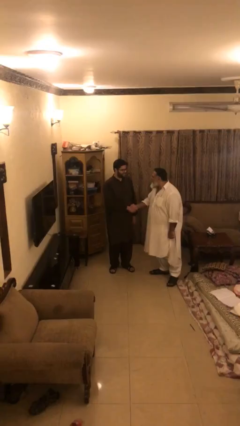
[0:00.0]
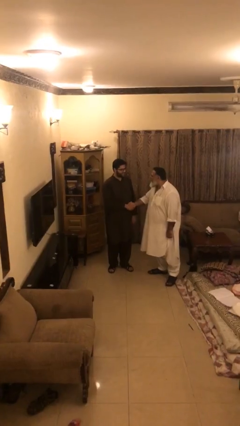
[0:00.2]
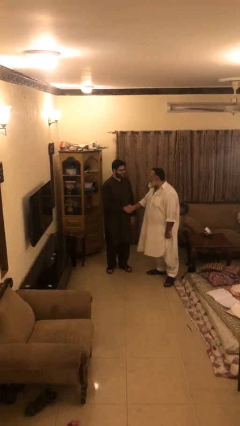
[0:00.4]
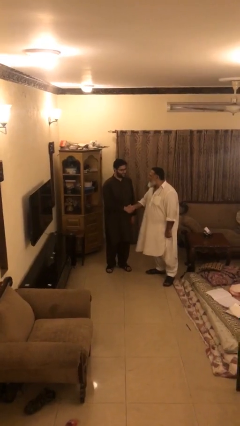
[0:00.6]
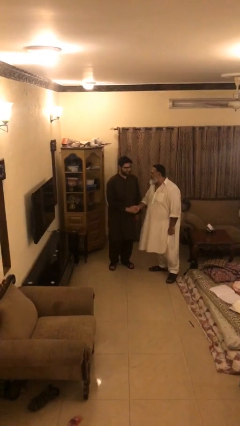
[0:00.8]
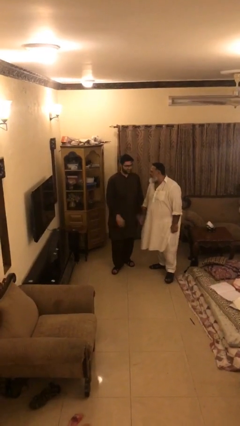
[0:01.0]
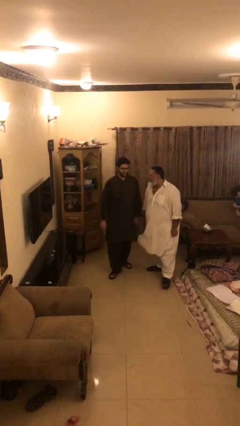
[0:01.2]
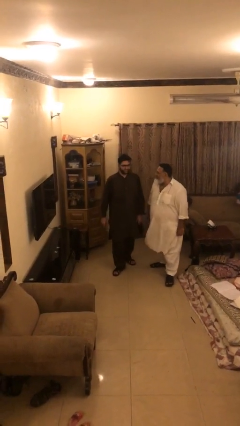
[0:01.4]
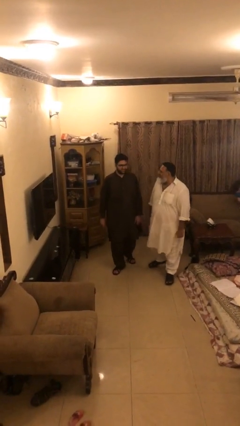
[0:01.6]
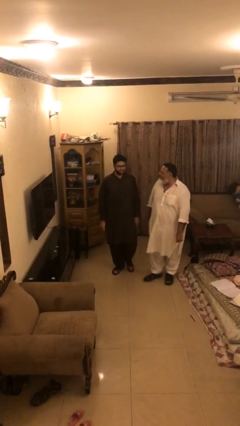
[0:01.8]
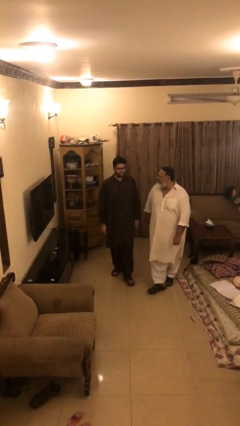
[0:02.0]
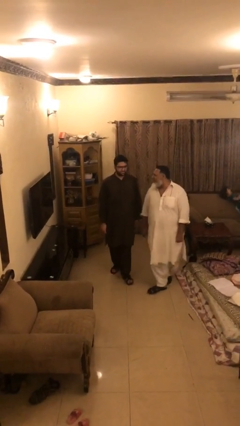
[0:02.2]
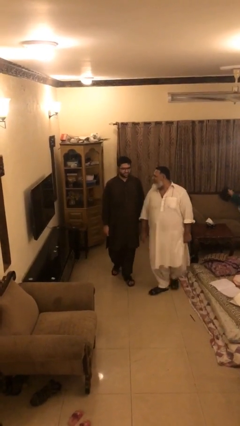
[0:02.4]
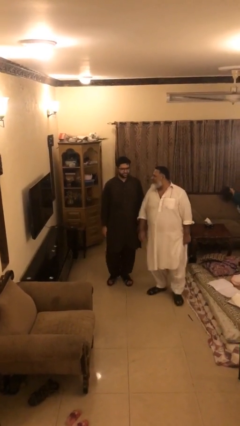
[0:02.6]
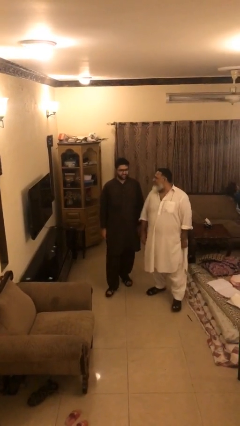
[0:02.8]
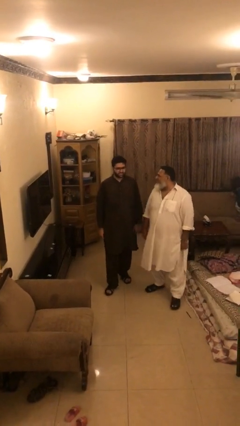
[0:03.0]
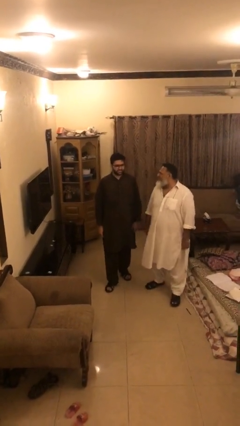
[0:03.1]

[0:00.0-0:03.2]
person talks to person

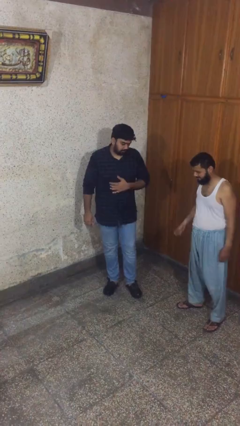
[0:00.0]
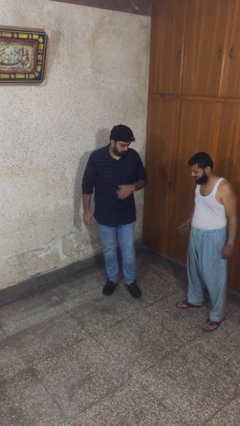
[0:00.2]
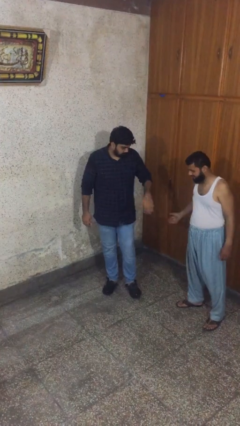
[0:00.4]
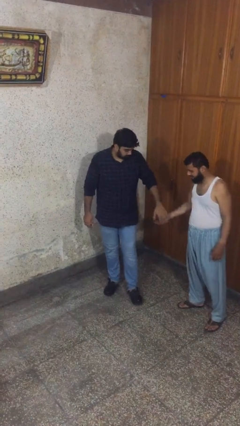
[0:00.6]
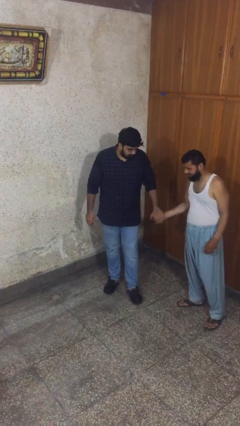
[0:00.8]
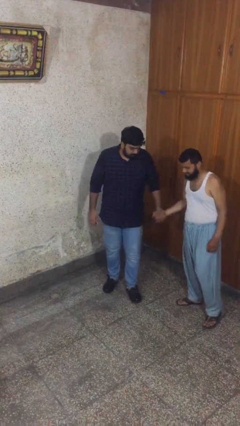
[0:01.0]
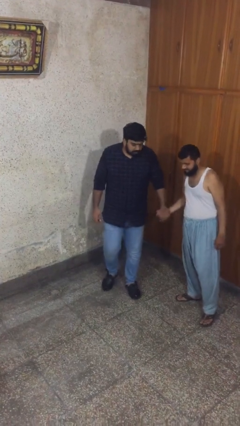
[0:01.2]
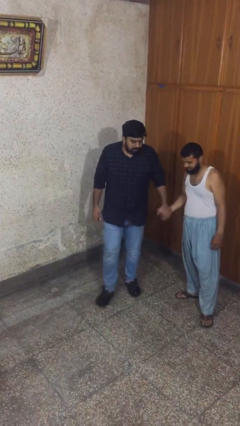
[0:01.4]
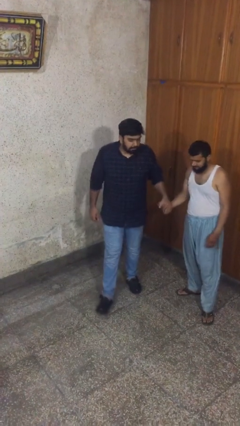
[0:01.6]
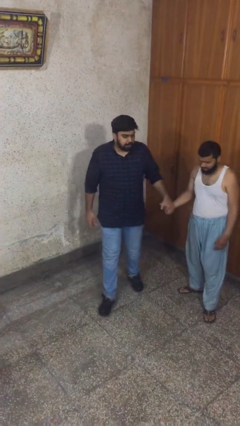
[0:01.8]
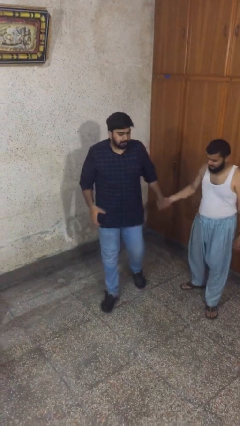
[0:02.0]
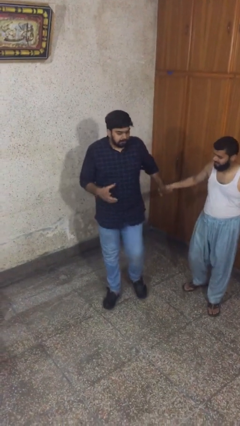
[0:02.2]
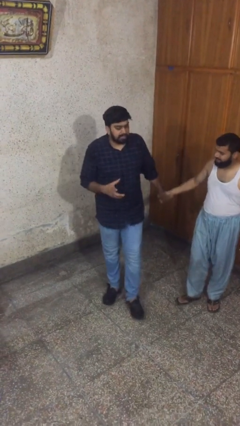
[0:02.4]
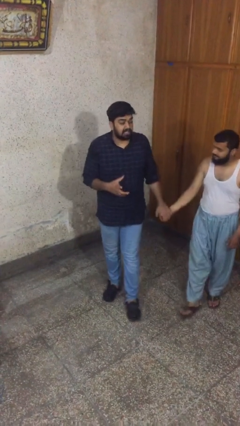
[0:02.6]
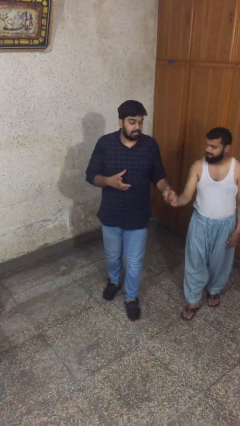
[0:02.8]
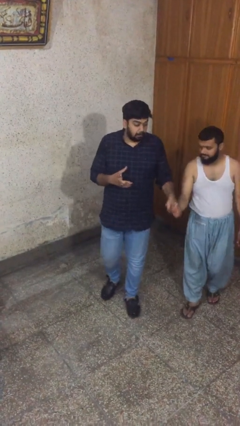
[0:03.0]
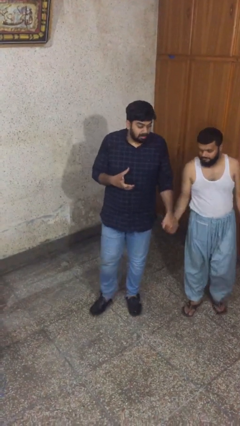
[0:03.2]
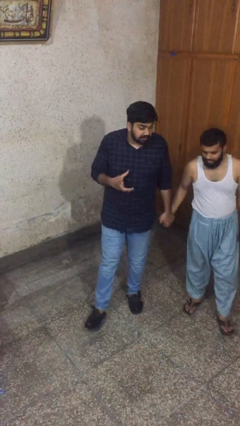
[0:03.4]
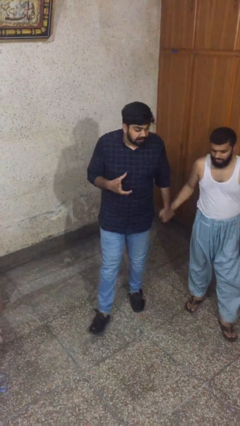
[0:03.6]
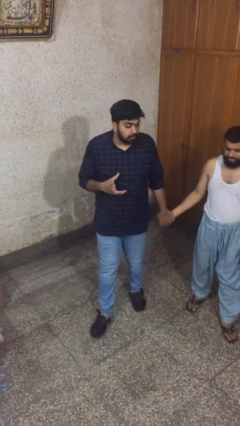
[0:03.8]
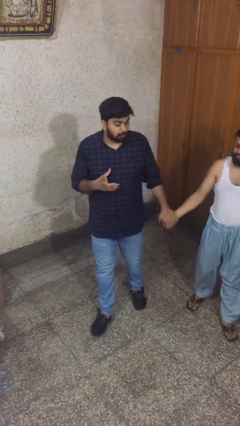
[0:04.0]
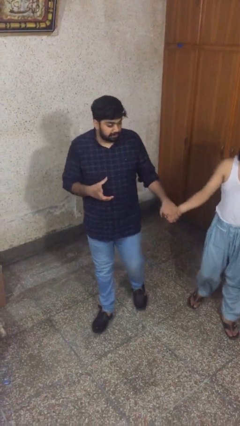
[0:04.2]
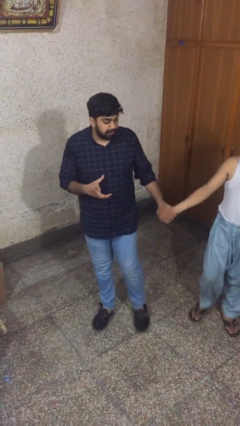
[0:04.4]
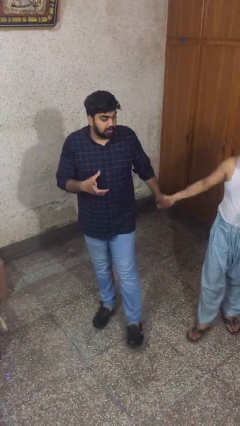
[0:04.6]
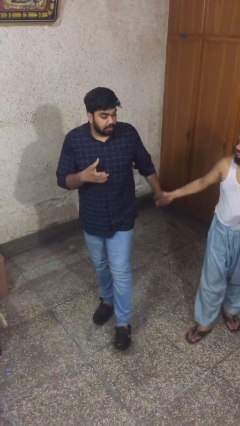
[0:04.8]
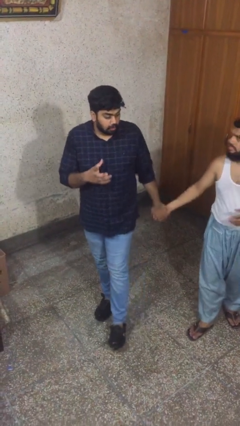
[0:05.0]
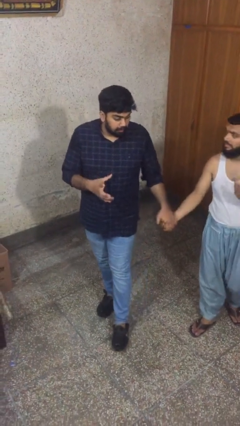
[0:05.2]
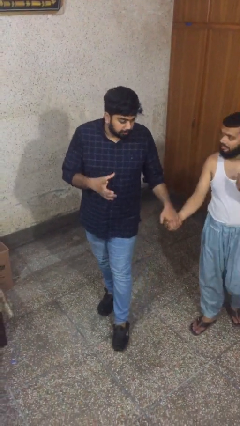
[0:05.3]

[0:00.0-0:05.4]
person holds hand

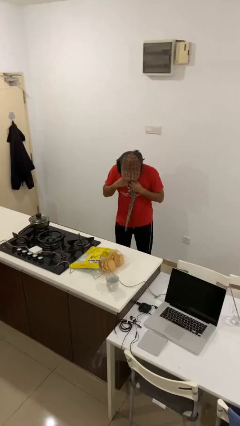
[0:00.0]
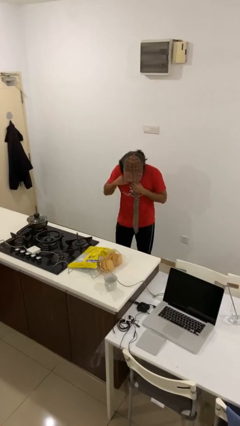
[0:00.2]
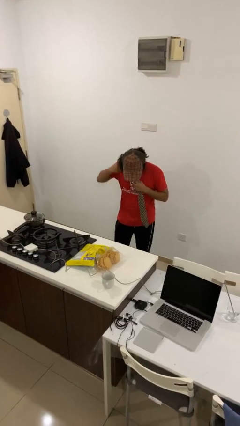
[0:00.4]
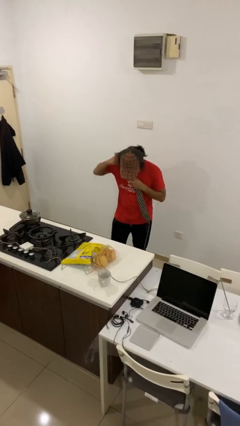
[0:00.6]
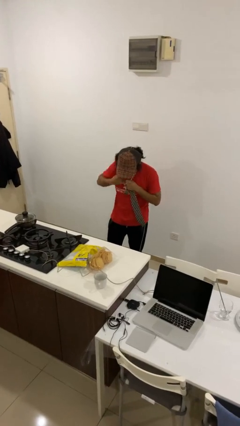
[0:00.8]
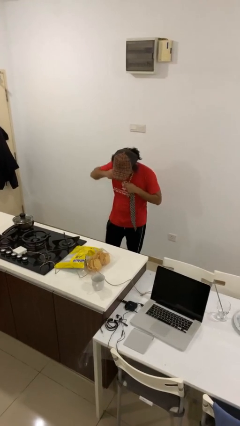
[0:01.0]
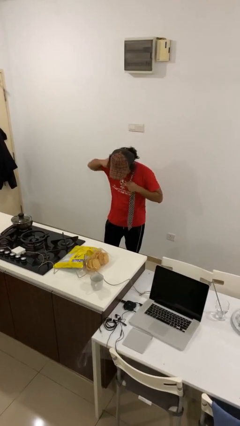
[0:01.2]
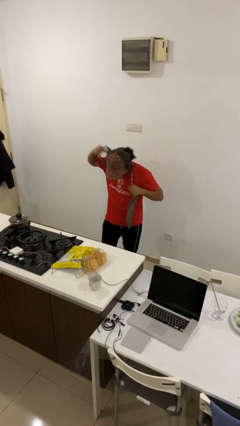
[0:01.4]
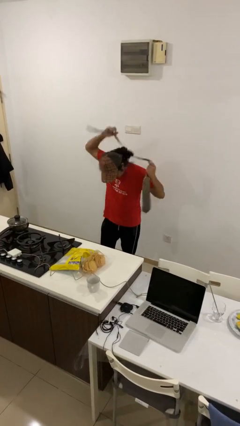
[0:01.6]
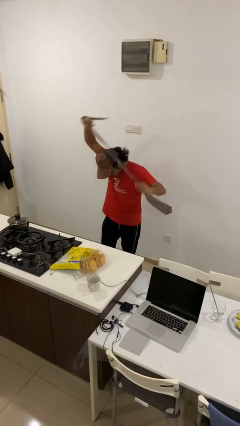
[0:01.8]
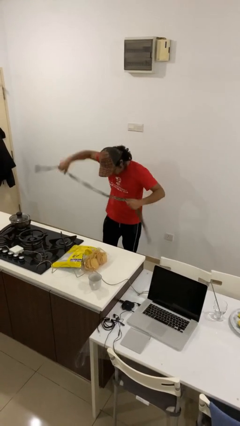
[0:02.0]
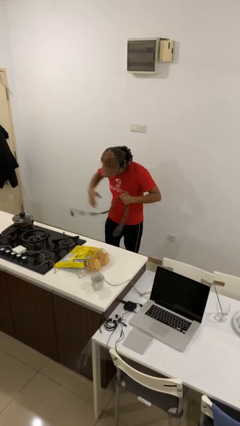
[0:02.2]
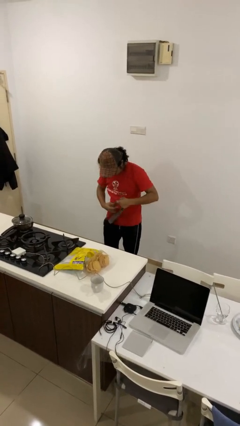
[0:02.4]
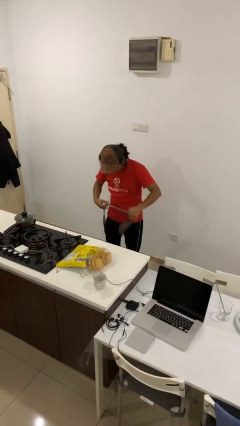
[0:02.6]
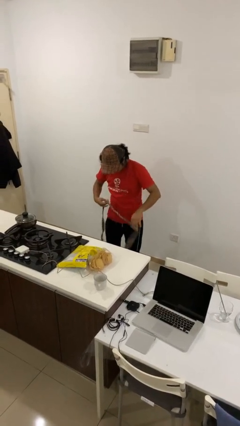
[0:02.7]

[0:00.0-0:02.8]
person takes off necktie

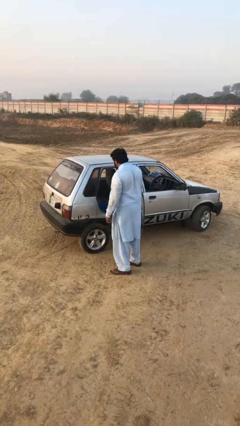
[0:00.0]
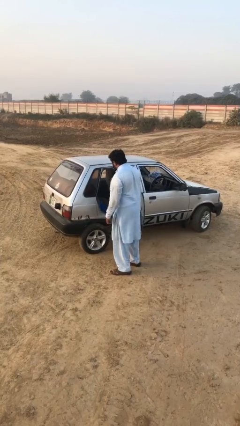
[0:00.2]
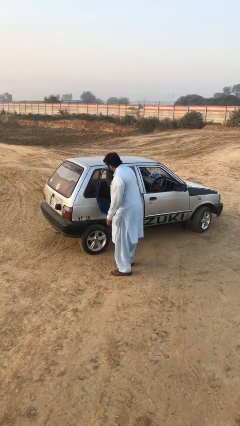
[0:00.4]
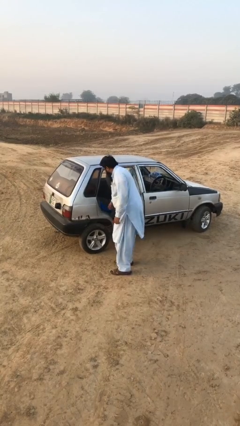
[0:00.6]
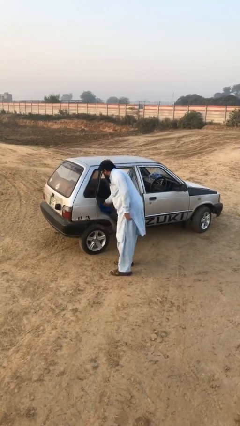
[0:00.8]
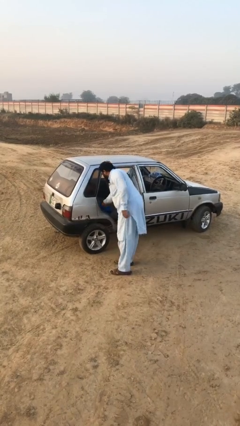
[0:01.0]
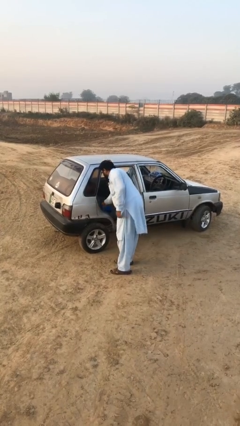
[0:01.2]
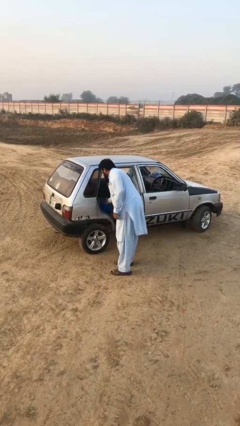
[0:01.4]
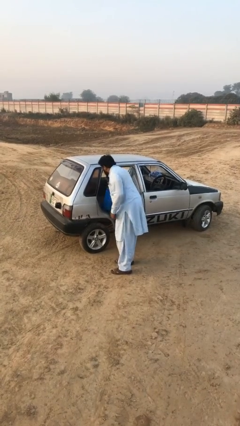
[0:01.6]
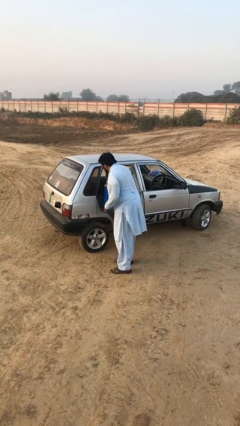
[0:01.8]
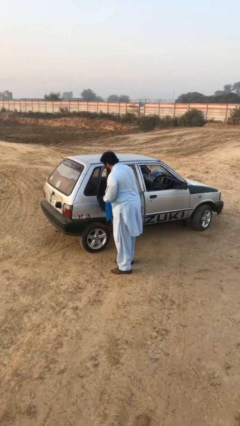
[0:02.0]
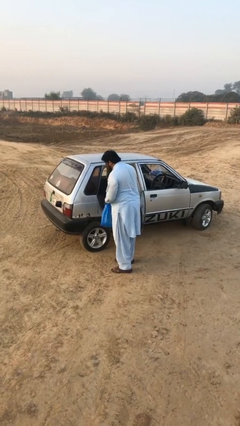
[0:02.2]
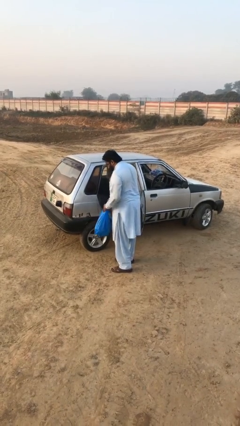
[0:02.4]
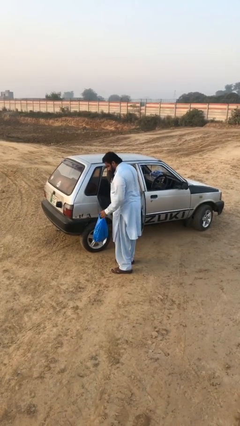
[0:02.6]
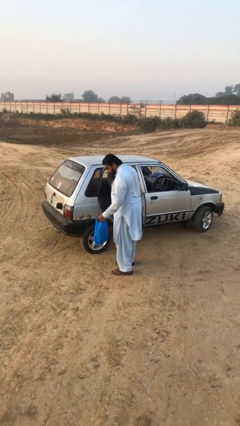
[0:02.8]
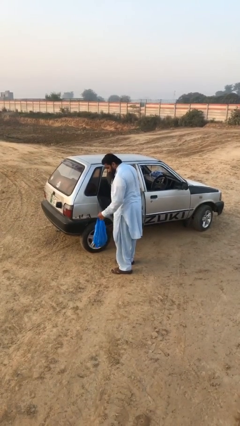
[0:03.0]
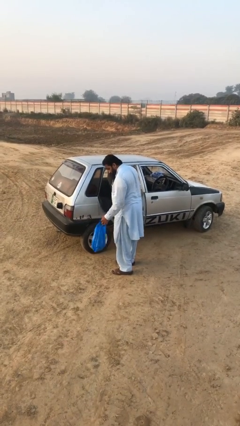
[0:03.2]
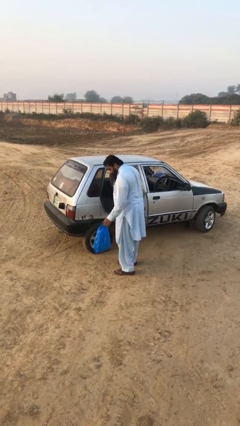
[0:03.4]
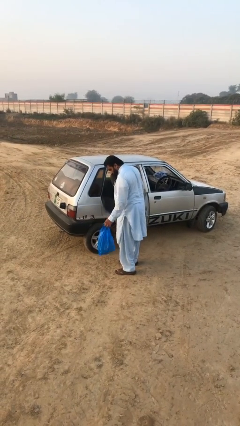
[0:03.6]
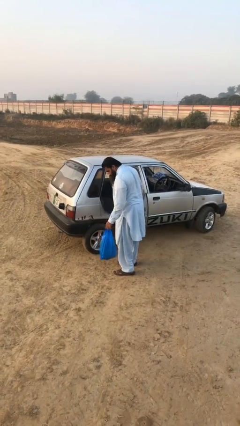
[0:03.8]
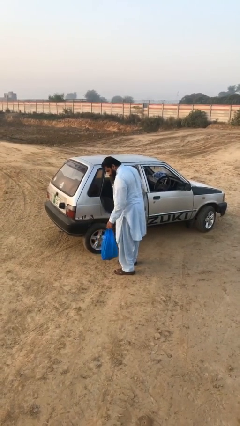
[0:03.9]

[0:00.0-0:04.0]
person unloads car

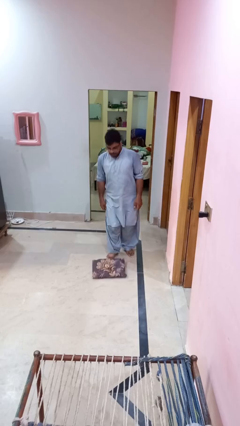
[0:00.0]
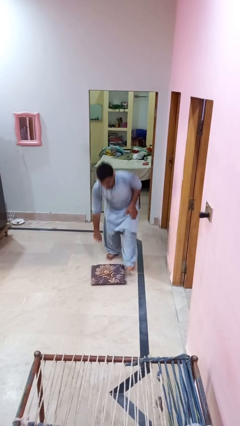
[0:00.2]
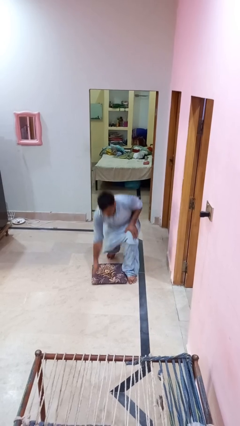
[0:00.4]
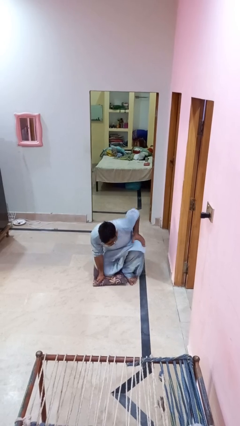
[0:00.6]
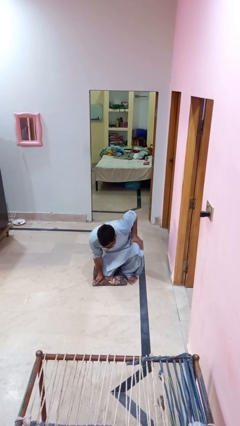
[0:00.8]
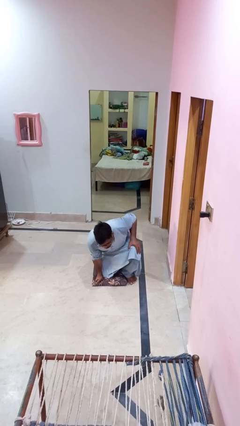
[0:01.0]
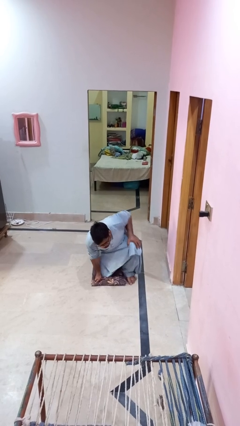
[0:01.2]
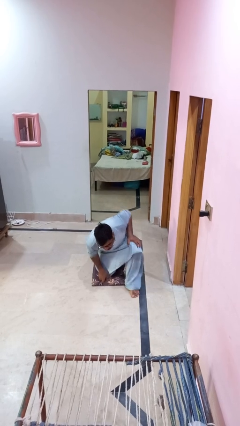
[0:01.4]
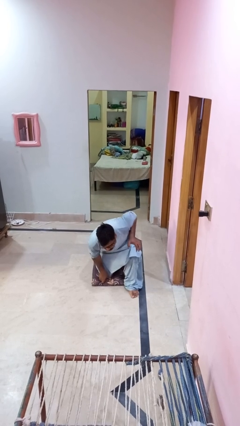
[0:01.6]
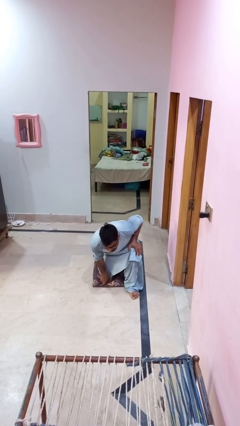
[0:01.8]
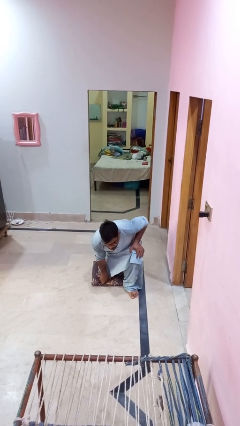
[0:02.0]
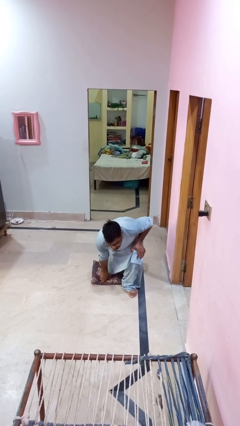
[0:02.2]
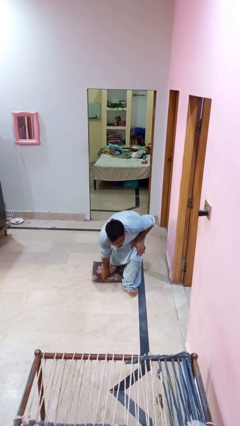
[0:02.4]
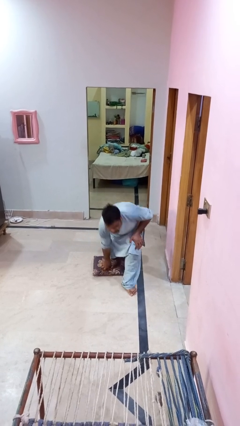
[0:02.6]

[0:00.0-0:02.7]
person trips on object on floor
